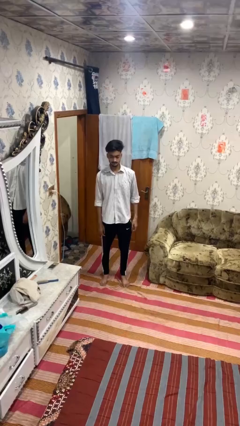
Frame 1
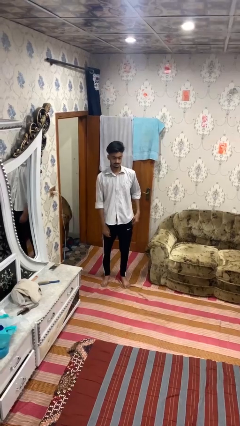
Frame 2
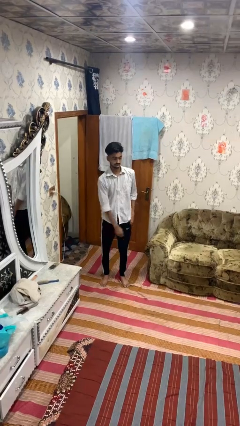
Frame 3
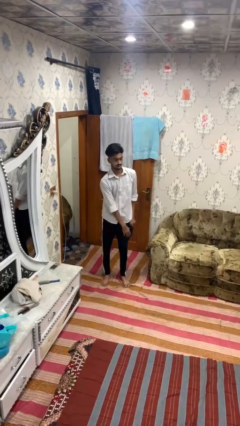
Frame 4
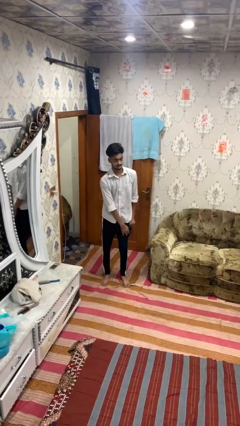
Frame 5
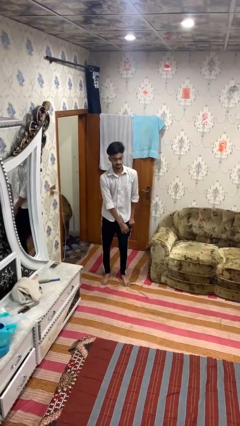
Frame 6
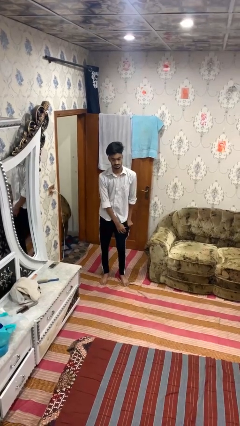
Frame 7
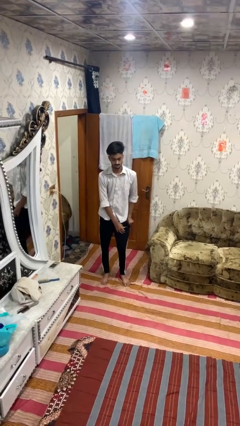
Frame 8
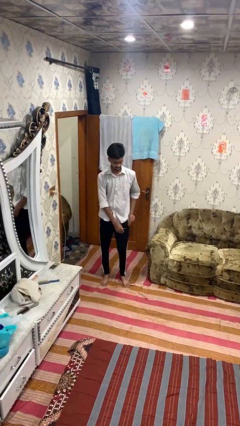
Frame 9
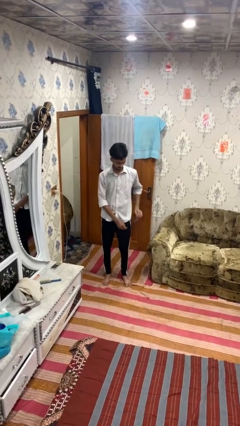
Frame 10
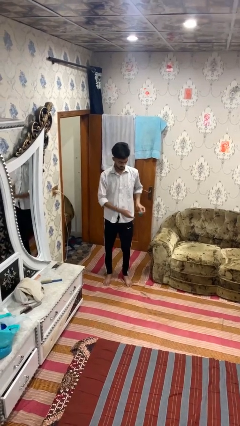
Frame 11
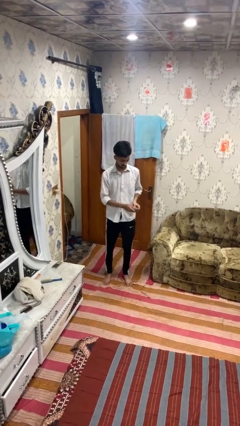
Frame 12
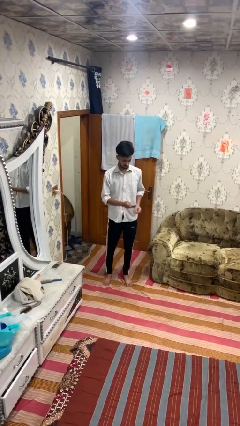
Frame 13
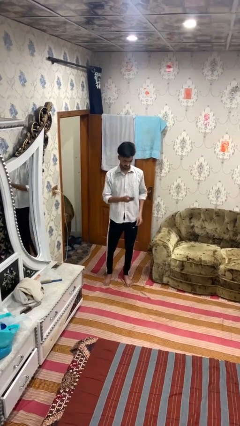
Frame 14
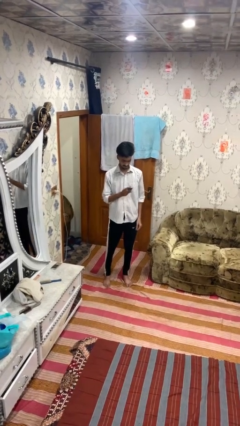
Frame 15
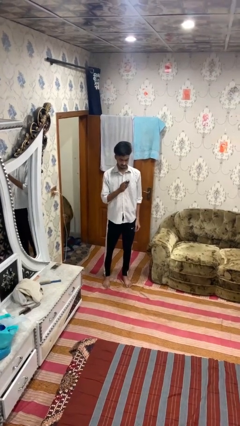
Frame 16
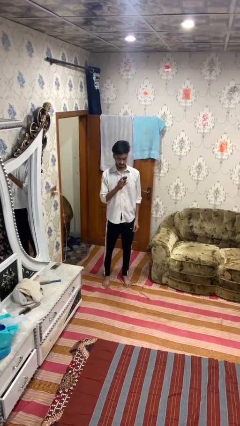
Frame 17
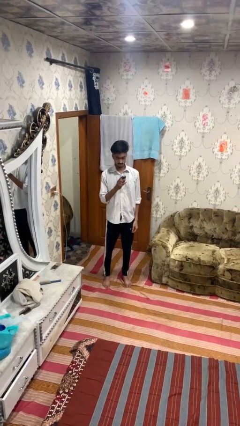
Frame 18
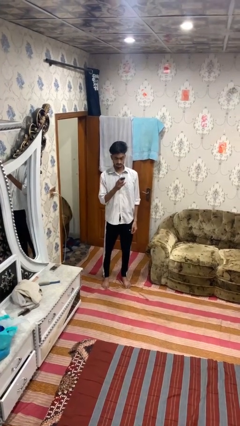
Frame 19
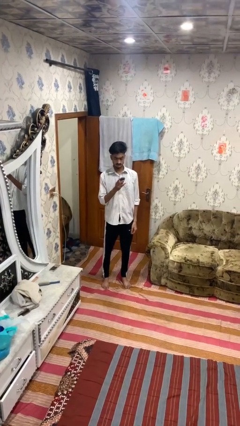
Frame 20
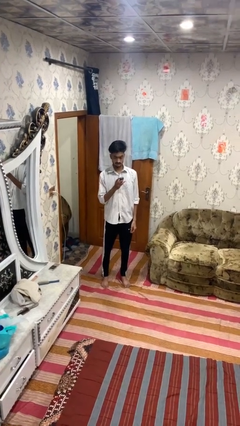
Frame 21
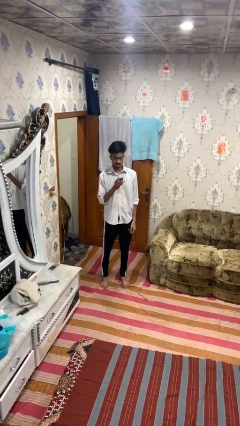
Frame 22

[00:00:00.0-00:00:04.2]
person takes phone from pocket

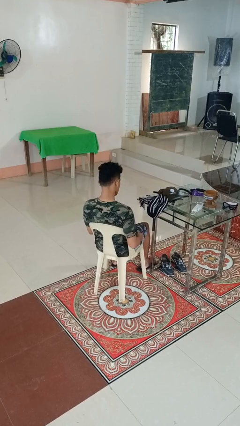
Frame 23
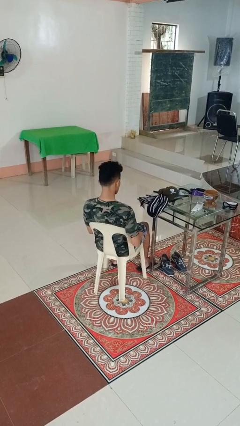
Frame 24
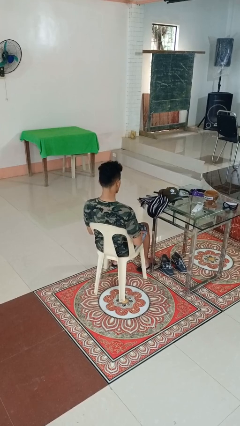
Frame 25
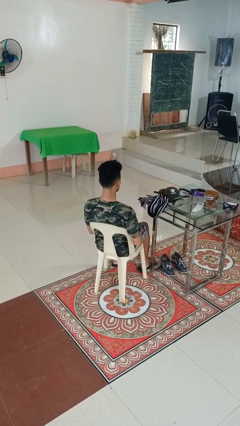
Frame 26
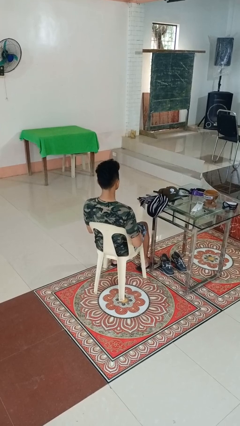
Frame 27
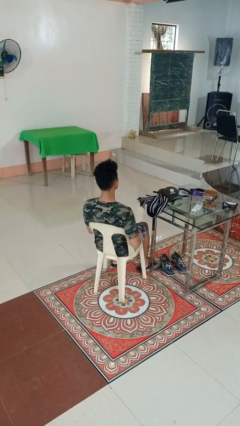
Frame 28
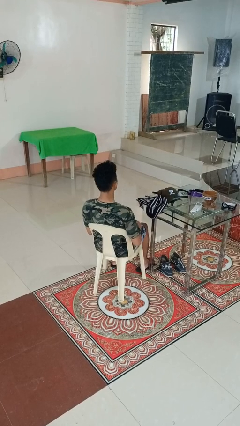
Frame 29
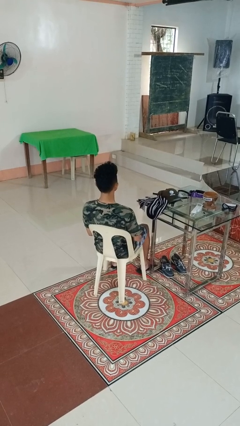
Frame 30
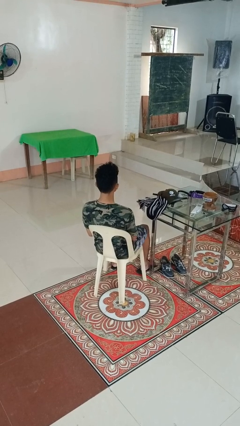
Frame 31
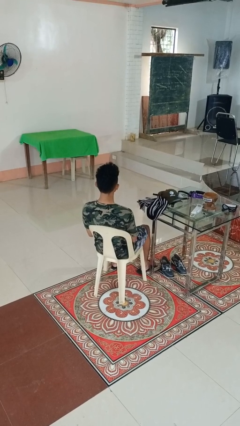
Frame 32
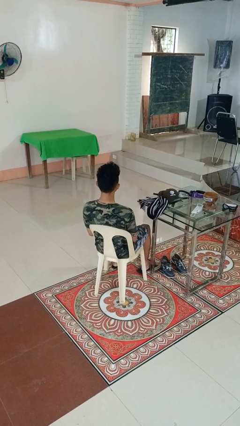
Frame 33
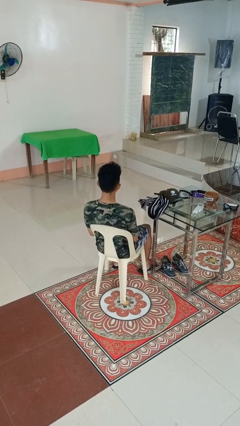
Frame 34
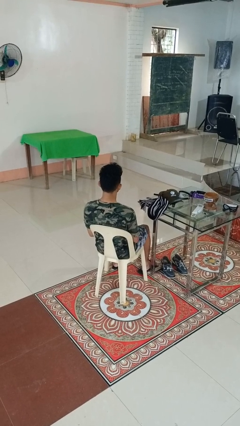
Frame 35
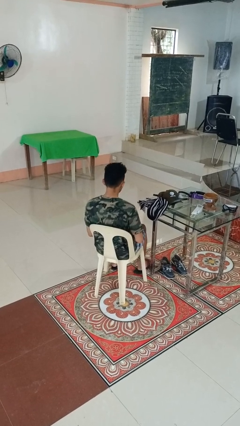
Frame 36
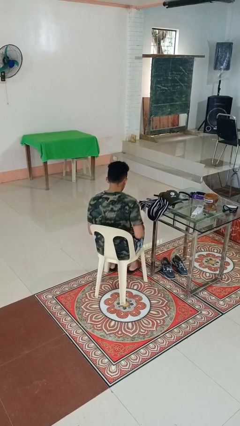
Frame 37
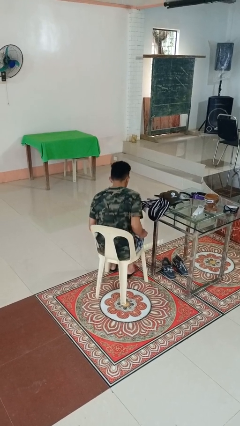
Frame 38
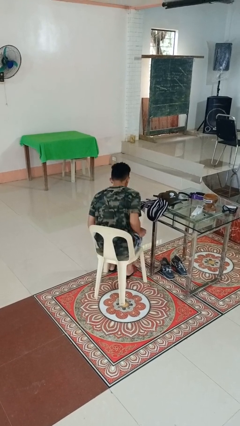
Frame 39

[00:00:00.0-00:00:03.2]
person puts phone into pocket

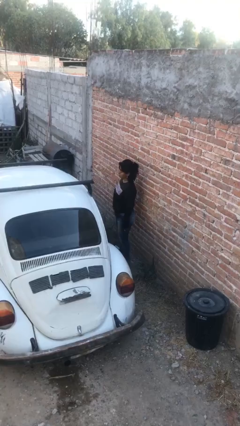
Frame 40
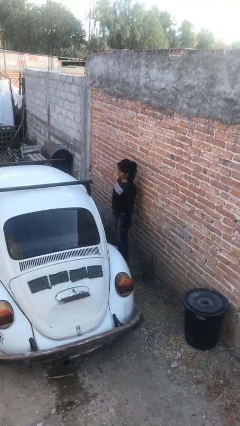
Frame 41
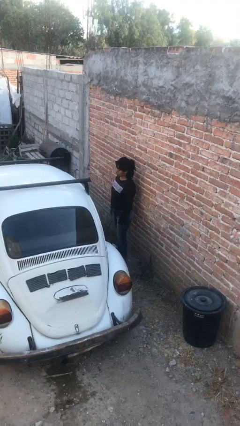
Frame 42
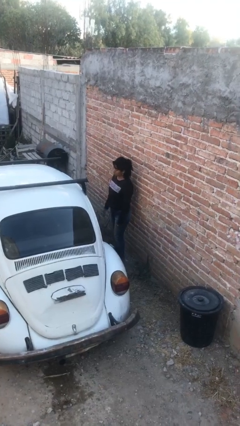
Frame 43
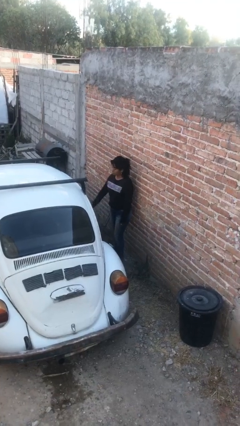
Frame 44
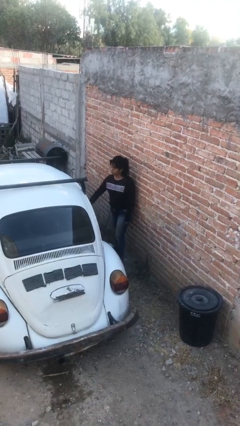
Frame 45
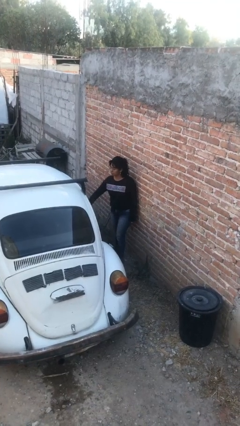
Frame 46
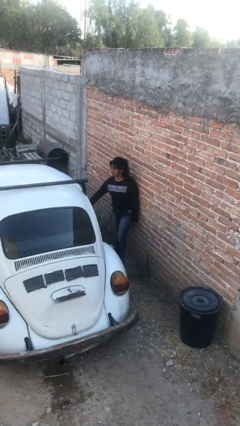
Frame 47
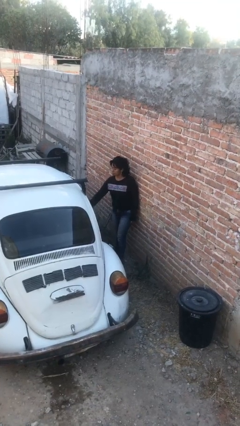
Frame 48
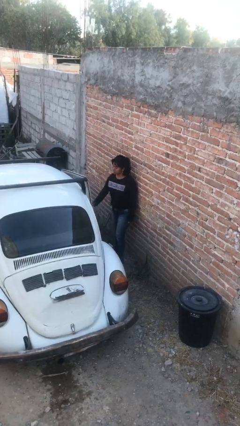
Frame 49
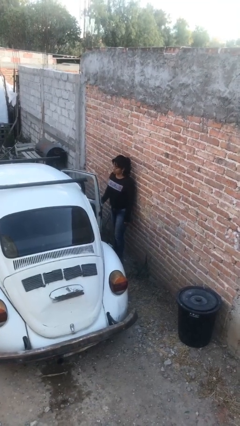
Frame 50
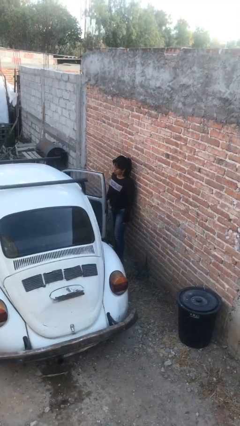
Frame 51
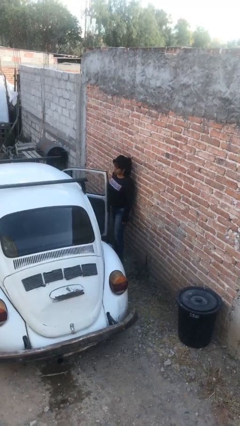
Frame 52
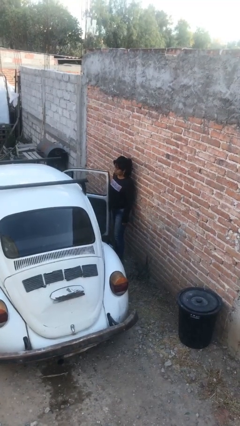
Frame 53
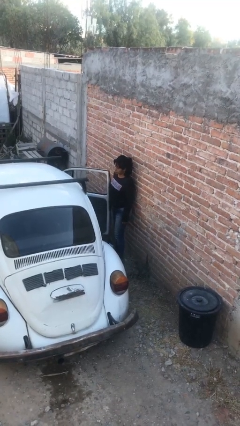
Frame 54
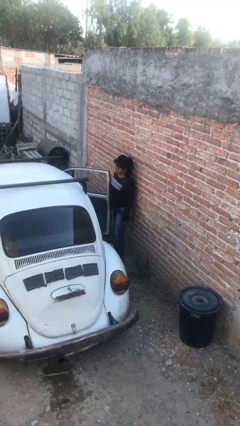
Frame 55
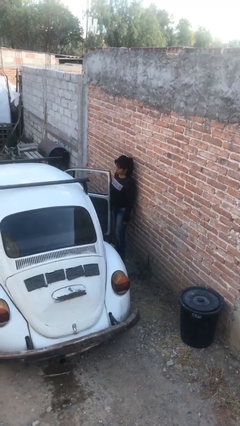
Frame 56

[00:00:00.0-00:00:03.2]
person opens car door

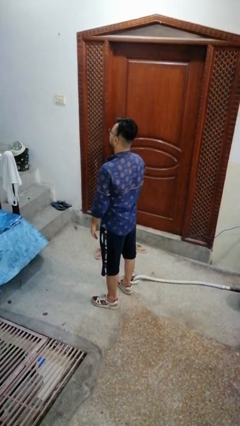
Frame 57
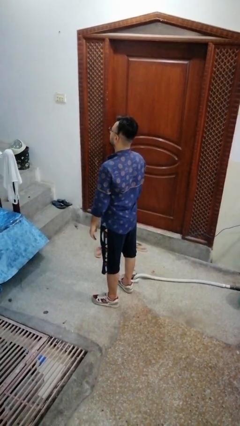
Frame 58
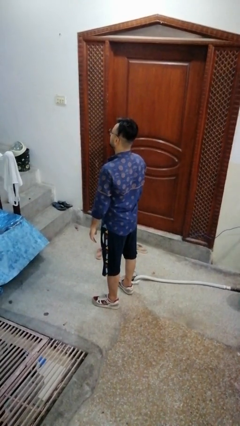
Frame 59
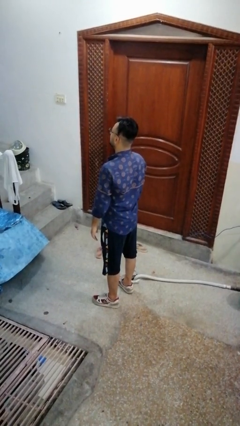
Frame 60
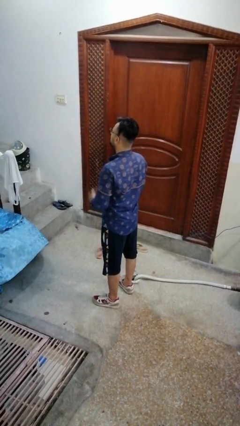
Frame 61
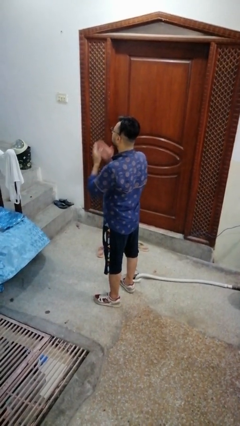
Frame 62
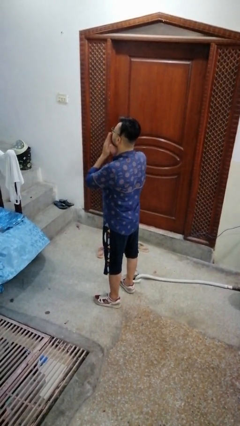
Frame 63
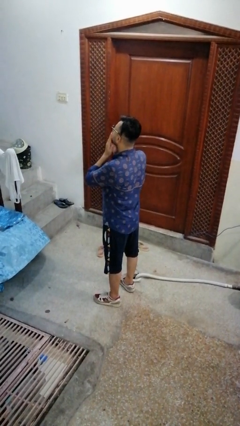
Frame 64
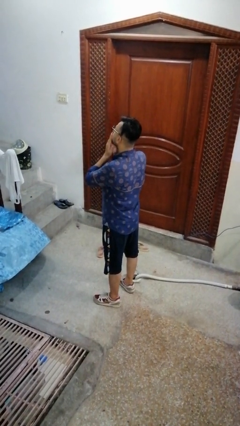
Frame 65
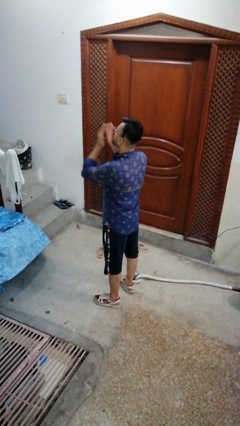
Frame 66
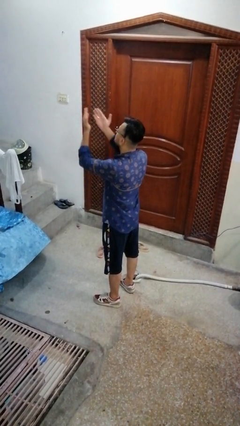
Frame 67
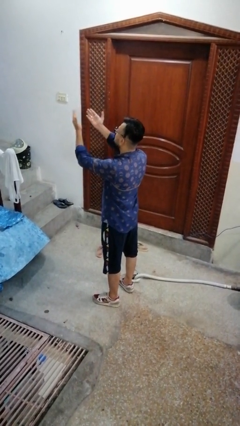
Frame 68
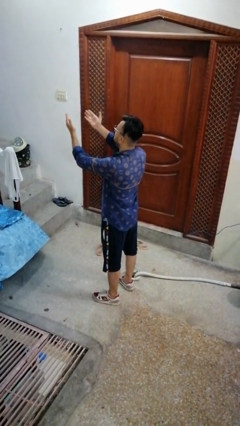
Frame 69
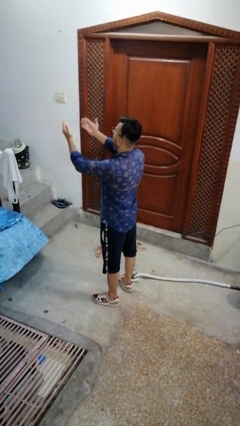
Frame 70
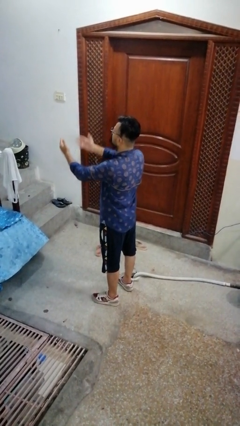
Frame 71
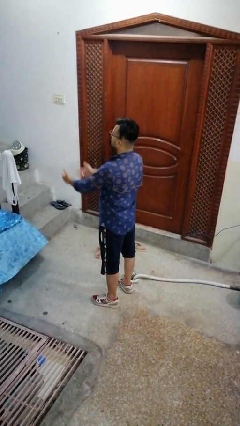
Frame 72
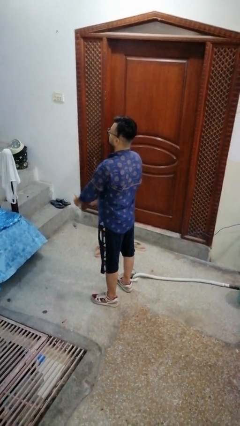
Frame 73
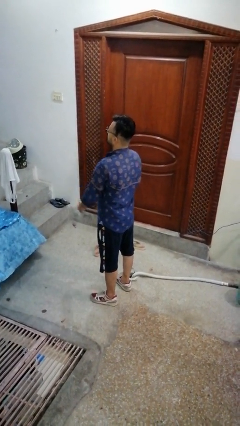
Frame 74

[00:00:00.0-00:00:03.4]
person gestures blow kiss

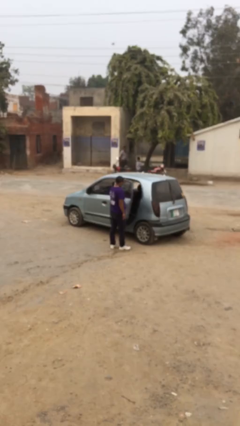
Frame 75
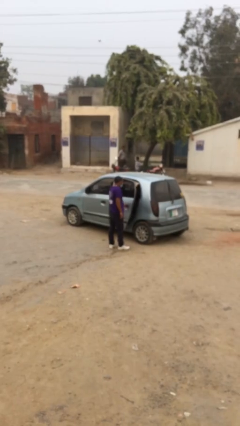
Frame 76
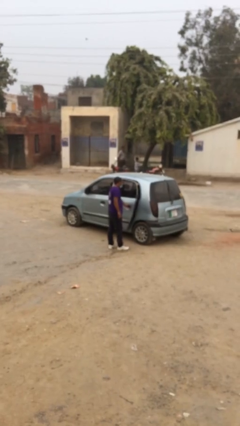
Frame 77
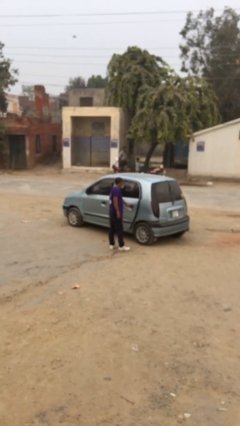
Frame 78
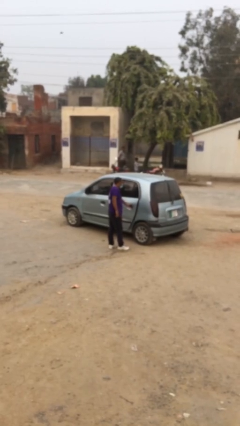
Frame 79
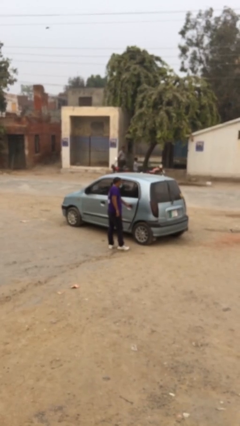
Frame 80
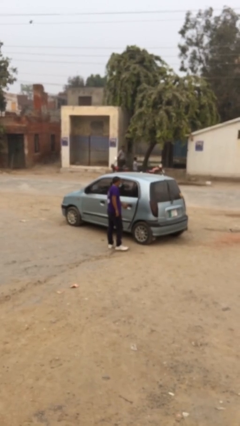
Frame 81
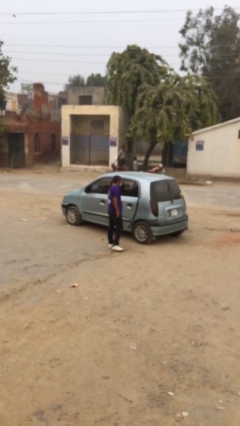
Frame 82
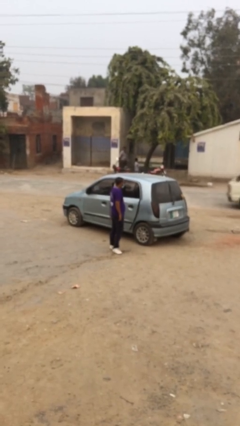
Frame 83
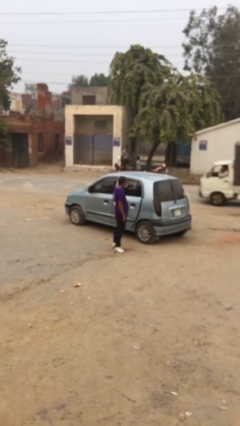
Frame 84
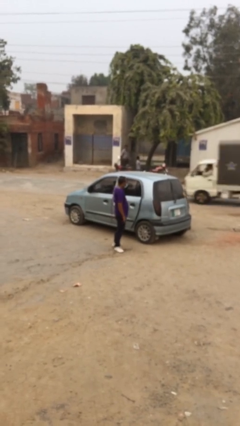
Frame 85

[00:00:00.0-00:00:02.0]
person closes car door

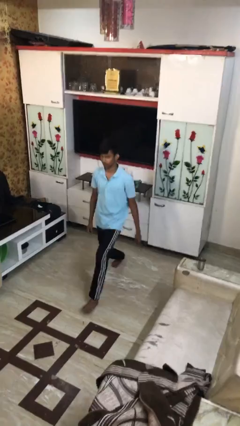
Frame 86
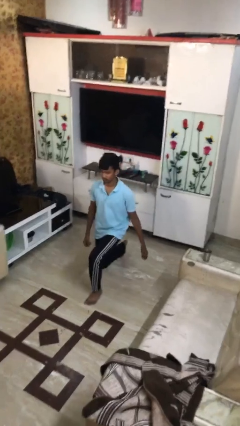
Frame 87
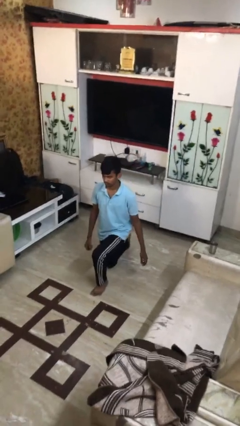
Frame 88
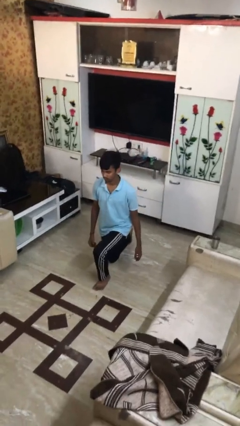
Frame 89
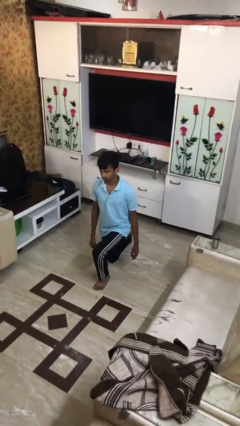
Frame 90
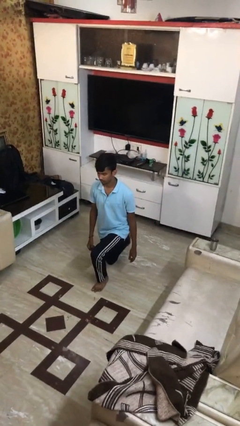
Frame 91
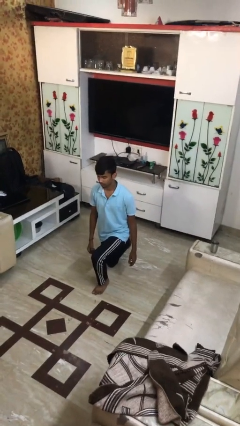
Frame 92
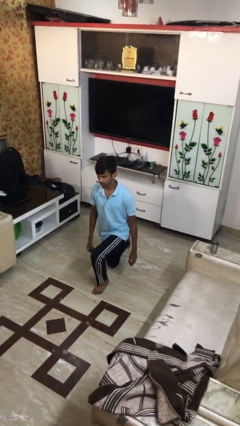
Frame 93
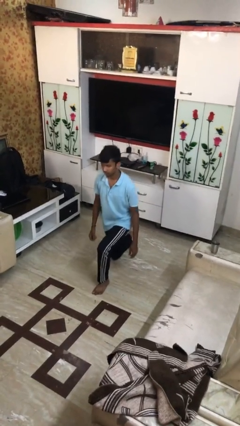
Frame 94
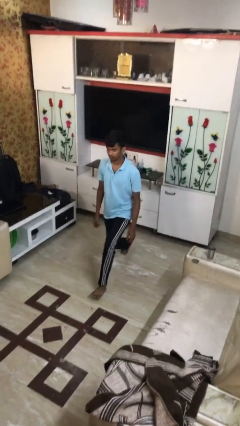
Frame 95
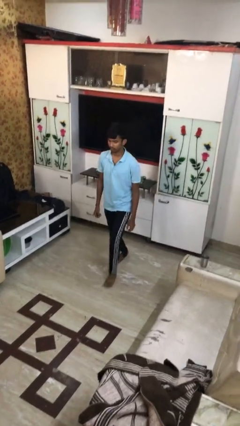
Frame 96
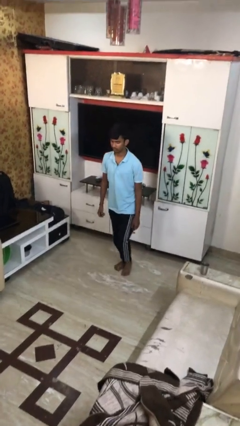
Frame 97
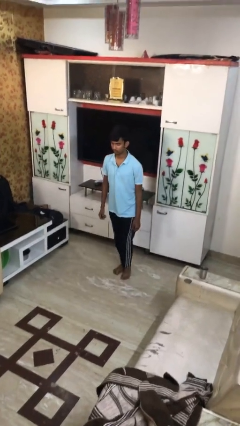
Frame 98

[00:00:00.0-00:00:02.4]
person exercises with lunges
